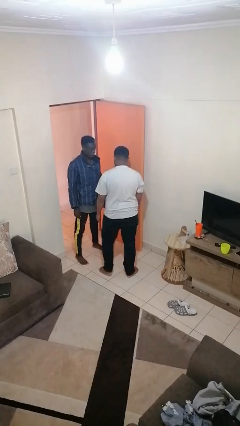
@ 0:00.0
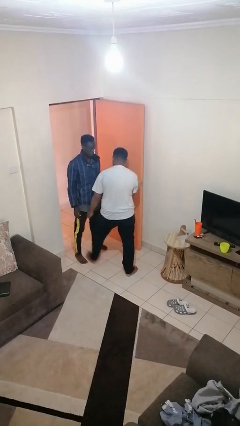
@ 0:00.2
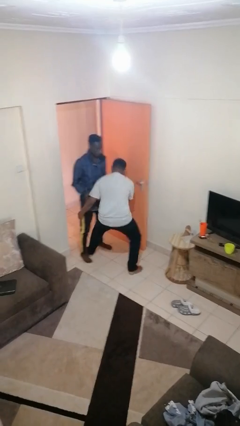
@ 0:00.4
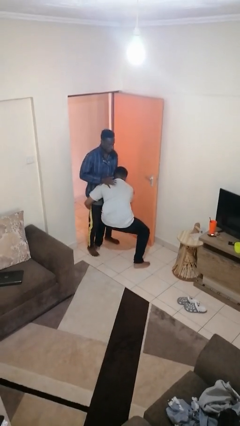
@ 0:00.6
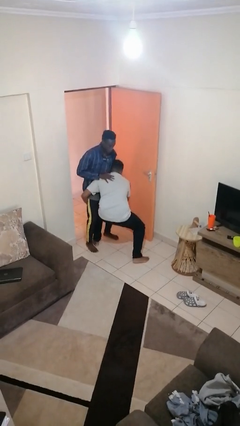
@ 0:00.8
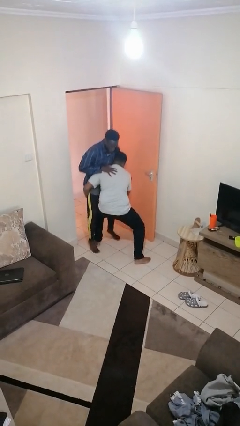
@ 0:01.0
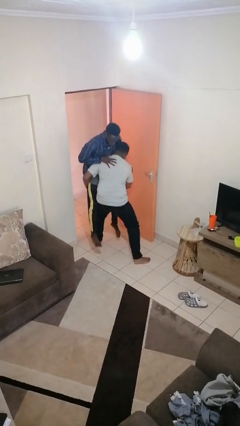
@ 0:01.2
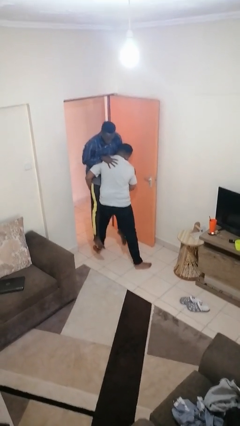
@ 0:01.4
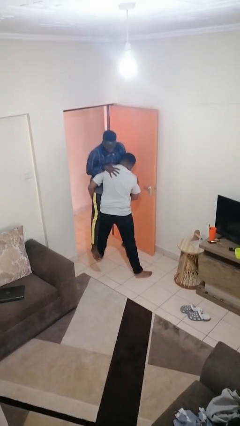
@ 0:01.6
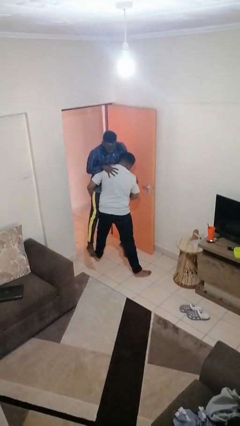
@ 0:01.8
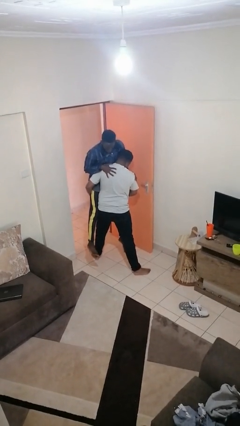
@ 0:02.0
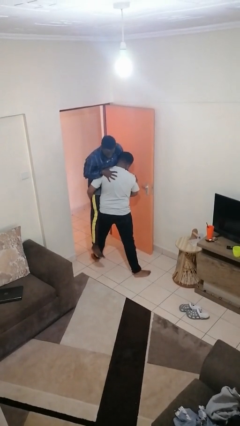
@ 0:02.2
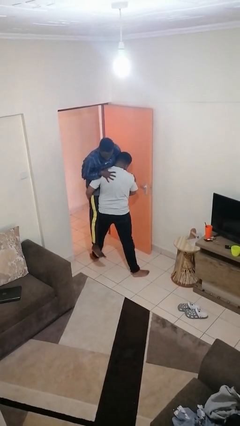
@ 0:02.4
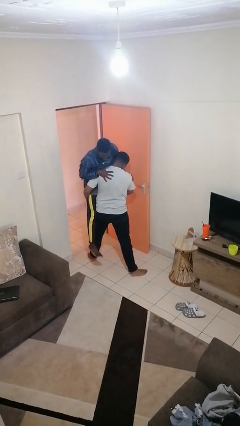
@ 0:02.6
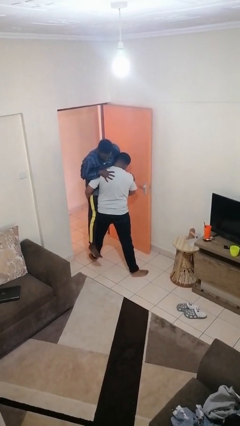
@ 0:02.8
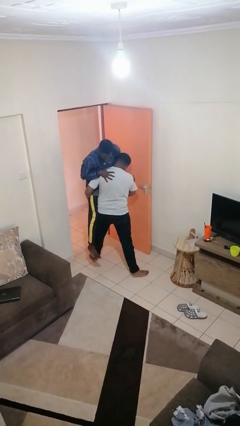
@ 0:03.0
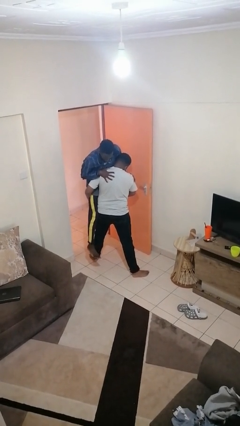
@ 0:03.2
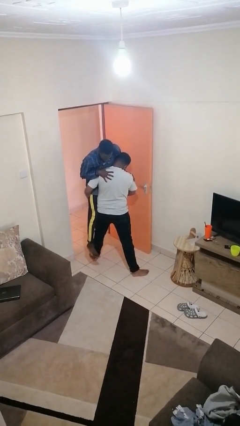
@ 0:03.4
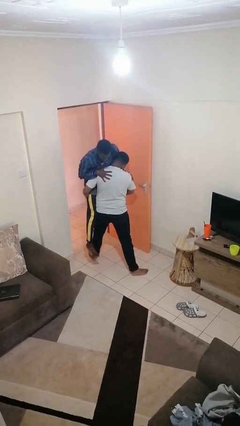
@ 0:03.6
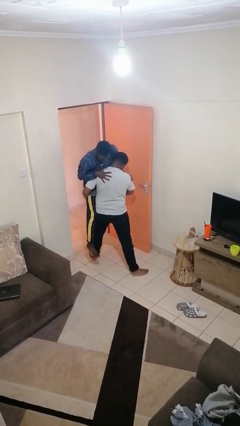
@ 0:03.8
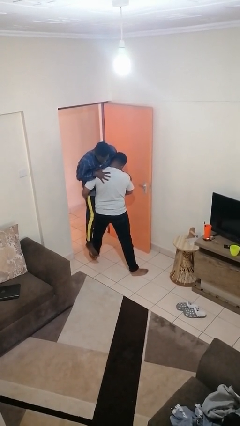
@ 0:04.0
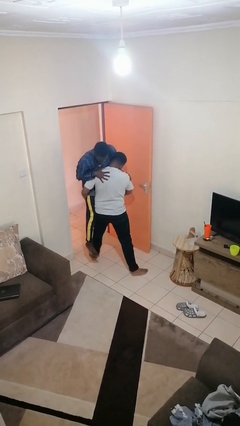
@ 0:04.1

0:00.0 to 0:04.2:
person picks up person

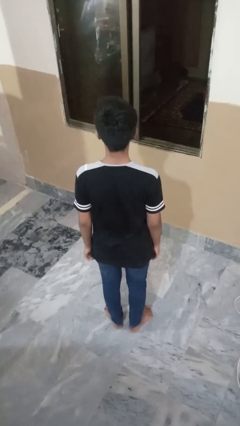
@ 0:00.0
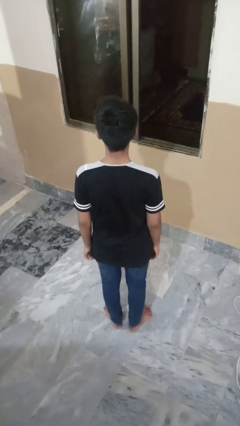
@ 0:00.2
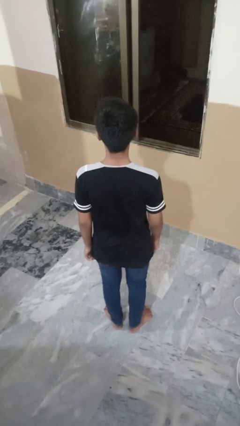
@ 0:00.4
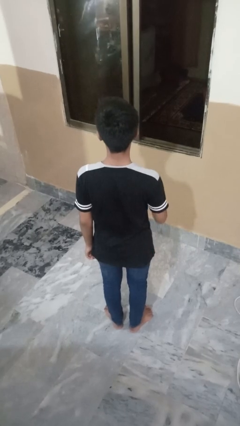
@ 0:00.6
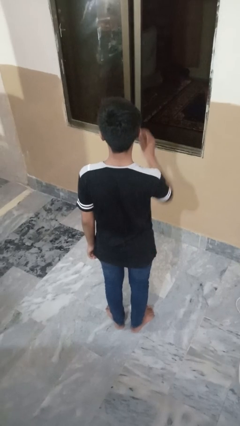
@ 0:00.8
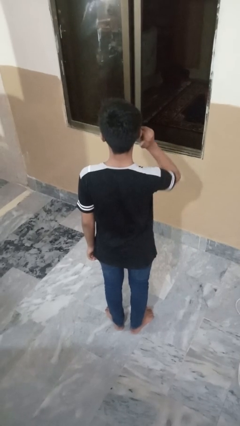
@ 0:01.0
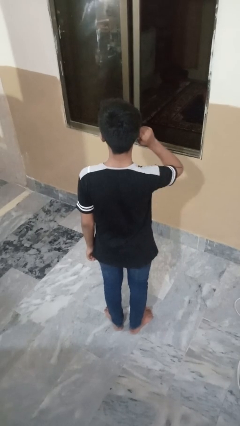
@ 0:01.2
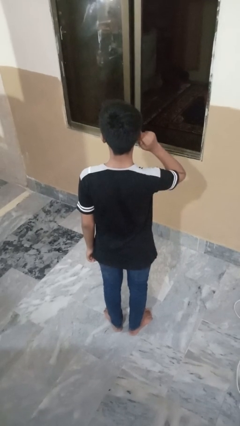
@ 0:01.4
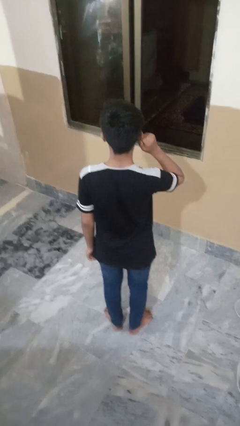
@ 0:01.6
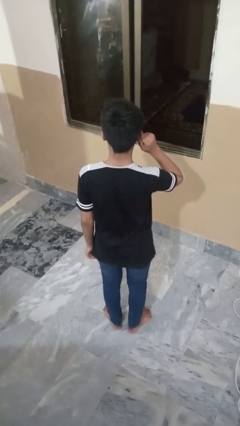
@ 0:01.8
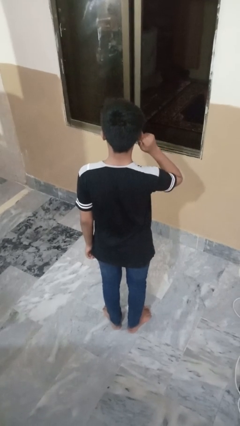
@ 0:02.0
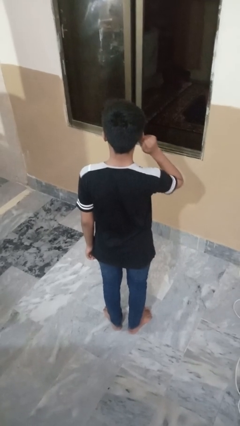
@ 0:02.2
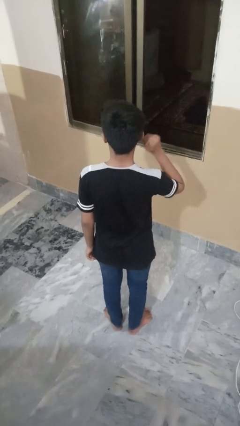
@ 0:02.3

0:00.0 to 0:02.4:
person touches earlobe

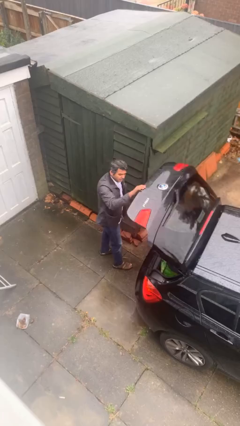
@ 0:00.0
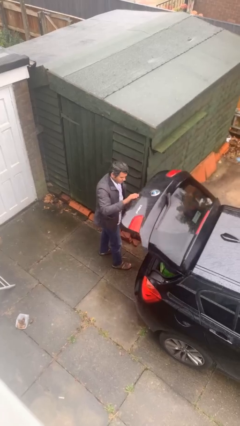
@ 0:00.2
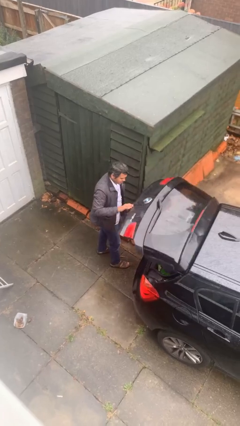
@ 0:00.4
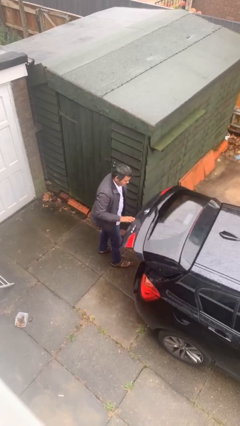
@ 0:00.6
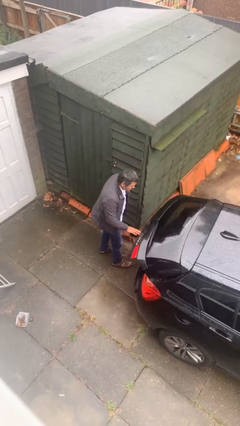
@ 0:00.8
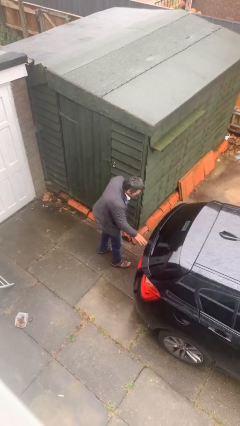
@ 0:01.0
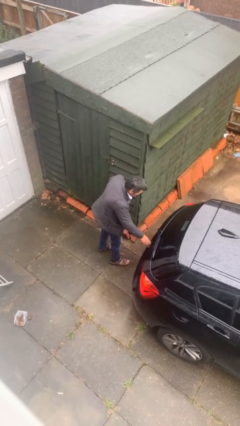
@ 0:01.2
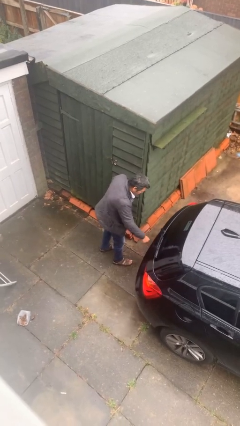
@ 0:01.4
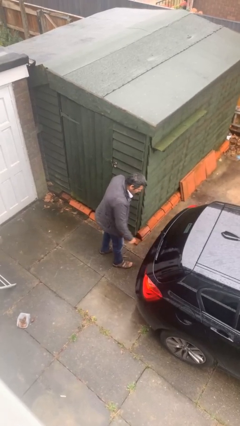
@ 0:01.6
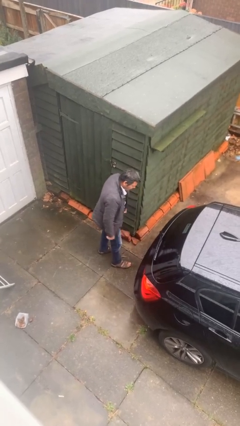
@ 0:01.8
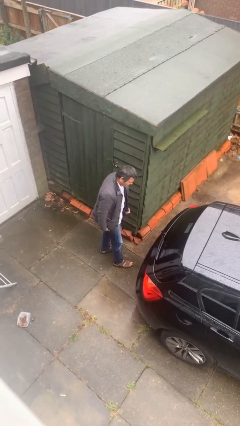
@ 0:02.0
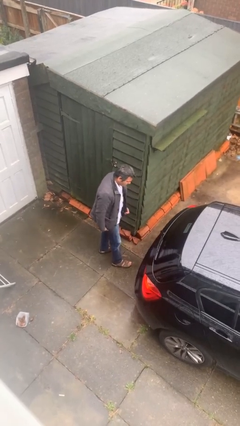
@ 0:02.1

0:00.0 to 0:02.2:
person closes car trunk

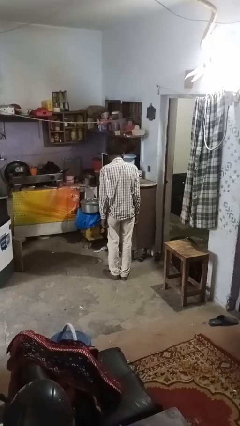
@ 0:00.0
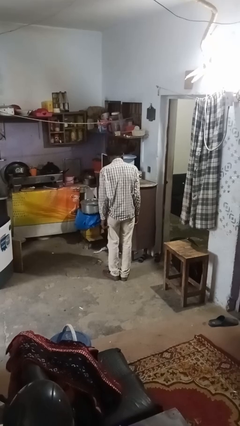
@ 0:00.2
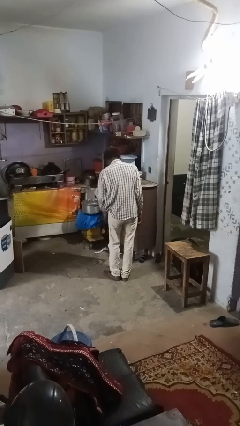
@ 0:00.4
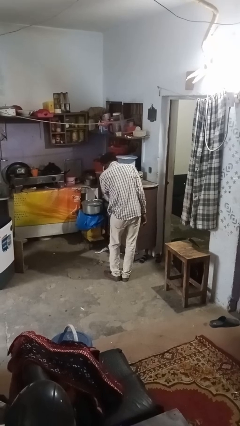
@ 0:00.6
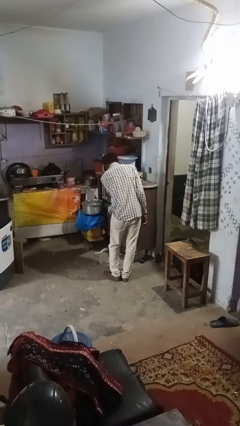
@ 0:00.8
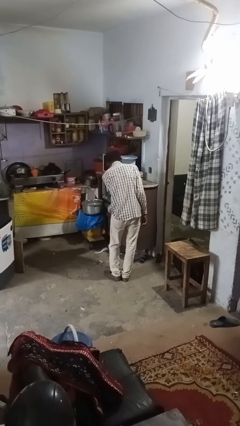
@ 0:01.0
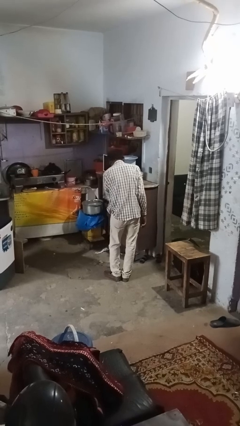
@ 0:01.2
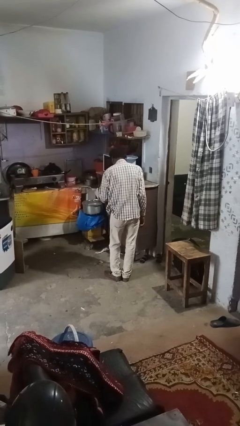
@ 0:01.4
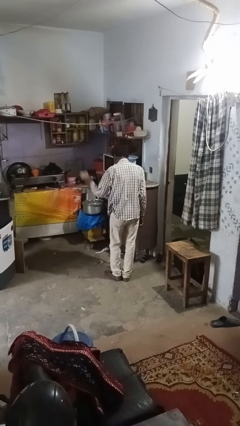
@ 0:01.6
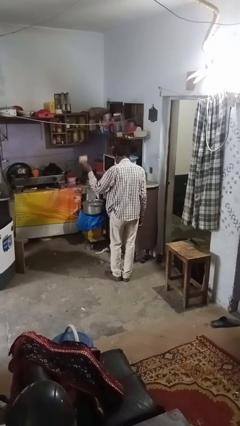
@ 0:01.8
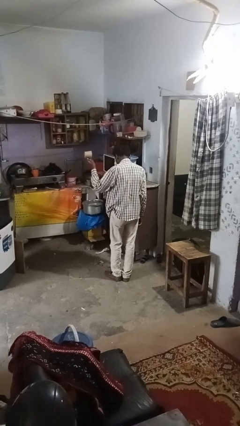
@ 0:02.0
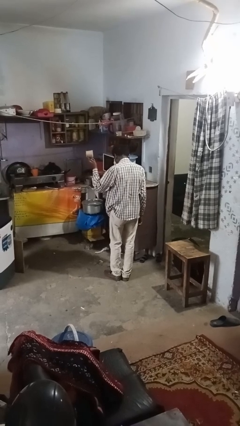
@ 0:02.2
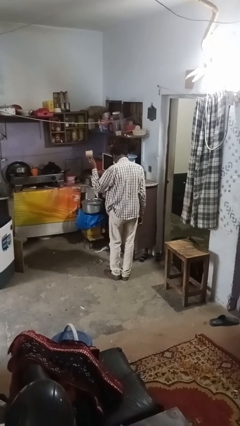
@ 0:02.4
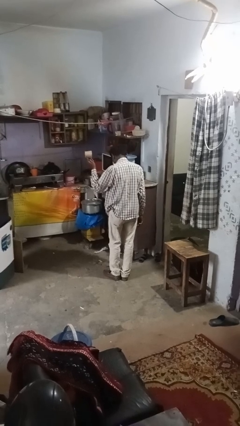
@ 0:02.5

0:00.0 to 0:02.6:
person takes object from kitchen drawer

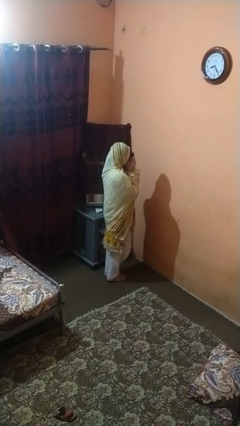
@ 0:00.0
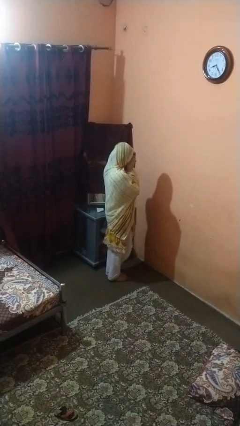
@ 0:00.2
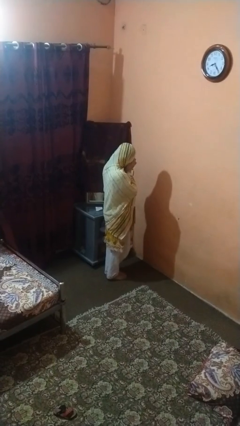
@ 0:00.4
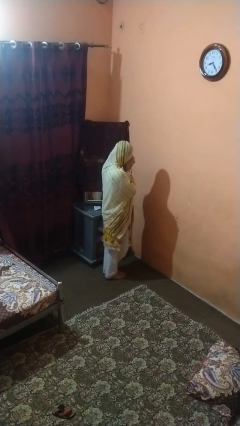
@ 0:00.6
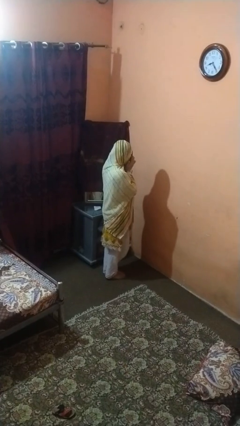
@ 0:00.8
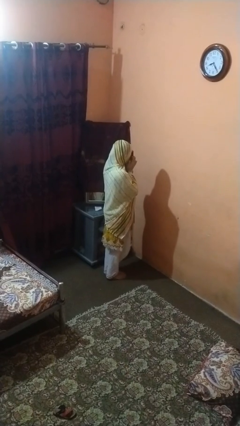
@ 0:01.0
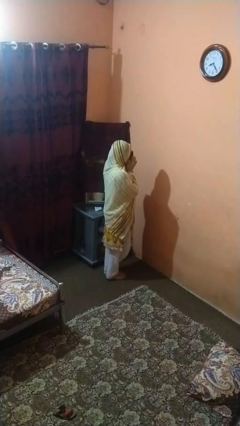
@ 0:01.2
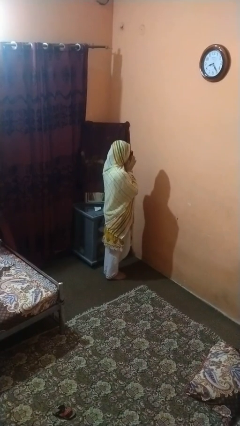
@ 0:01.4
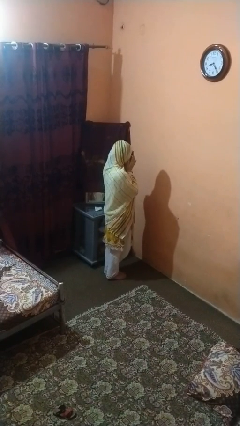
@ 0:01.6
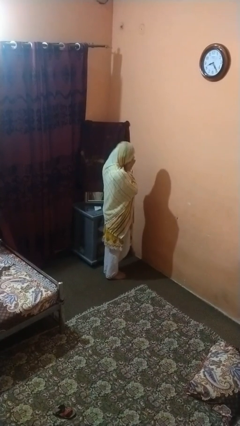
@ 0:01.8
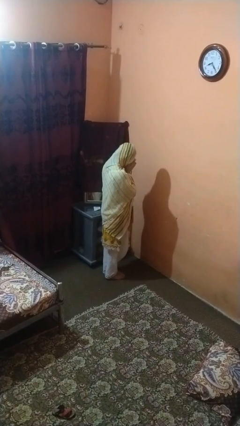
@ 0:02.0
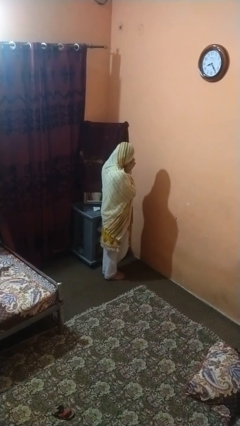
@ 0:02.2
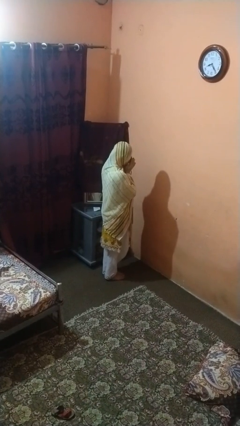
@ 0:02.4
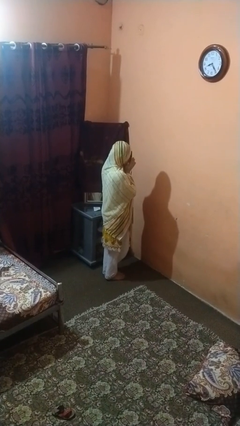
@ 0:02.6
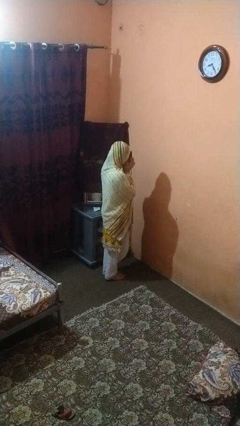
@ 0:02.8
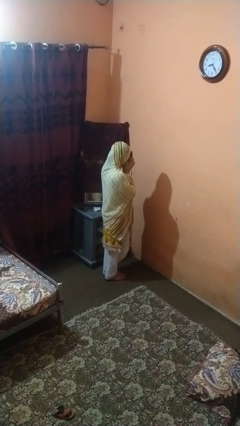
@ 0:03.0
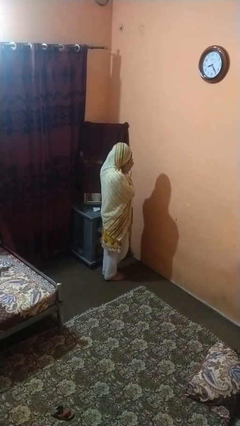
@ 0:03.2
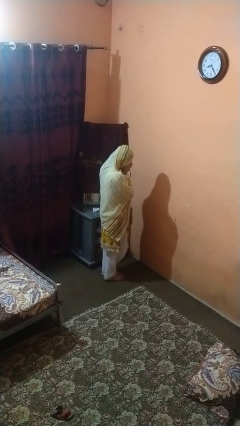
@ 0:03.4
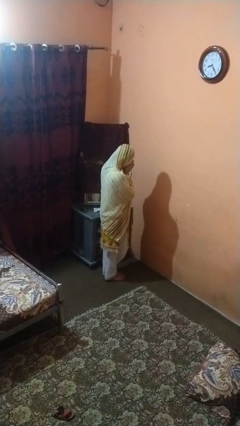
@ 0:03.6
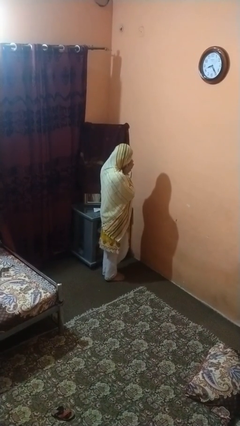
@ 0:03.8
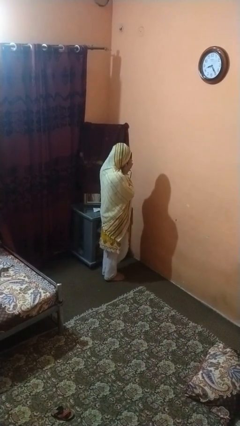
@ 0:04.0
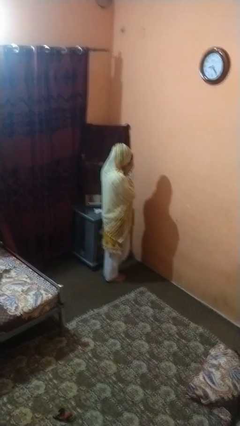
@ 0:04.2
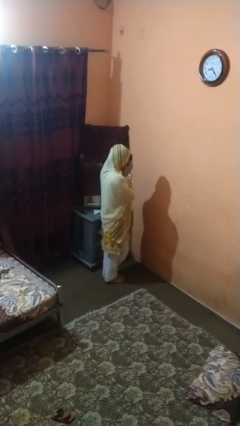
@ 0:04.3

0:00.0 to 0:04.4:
person sneezes into hand

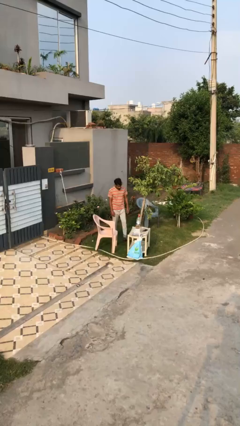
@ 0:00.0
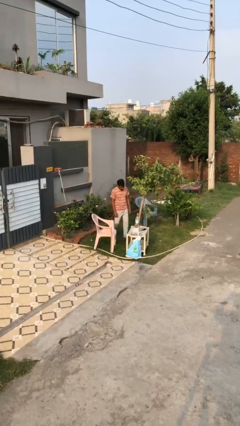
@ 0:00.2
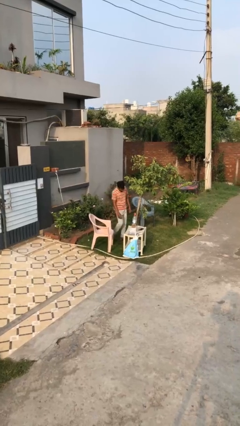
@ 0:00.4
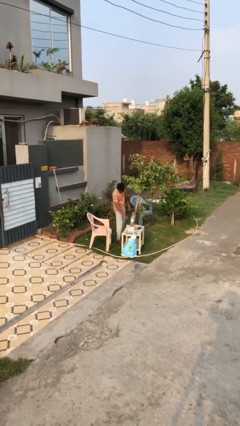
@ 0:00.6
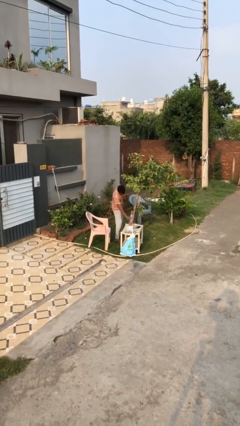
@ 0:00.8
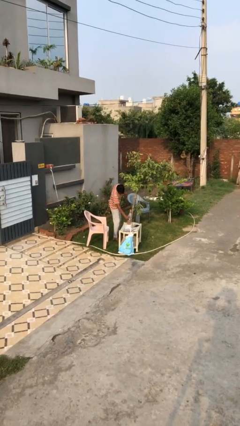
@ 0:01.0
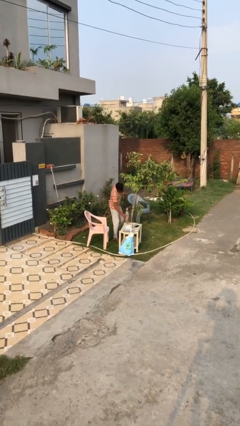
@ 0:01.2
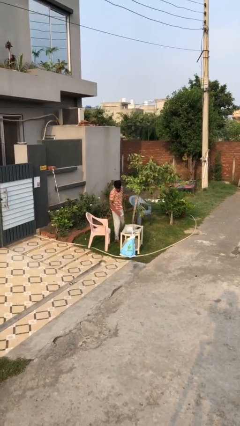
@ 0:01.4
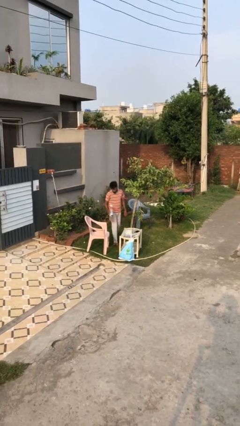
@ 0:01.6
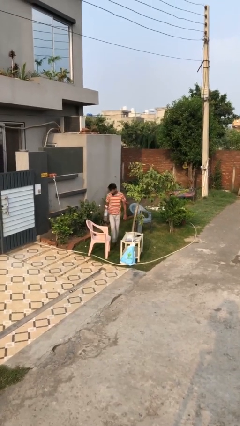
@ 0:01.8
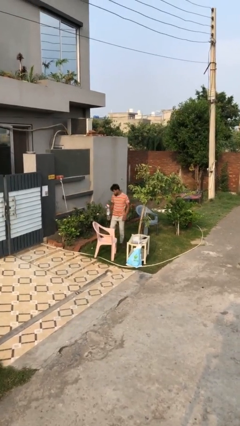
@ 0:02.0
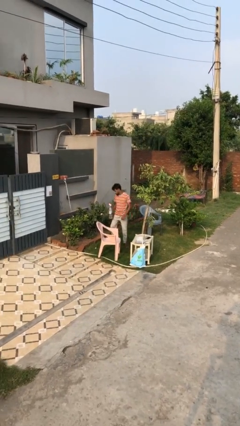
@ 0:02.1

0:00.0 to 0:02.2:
person picks up object from table
